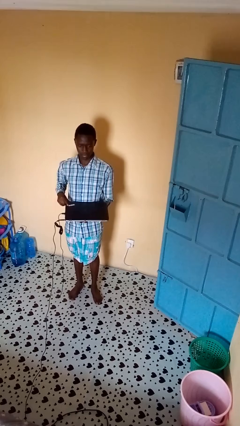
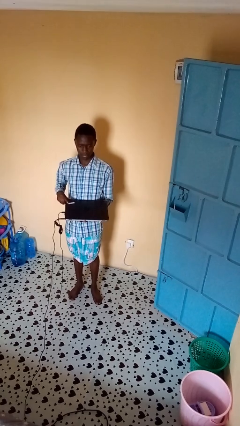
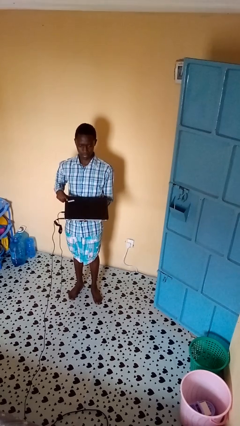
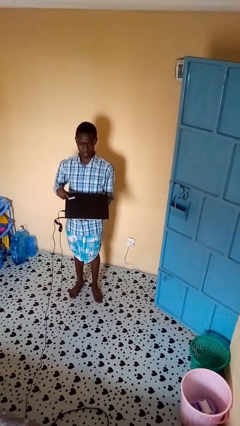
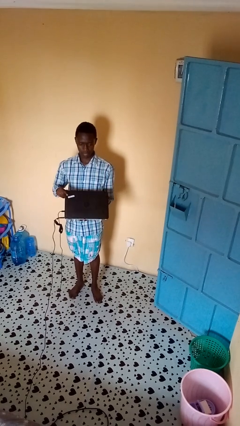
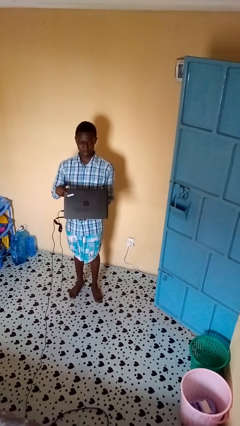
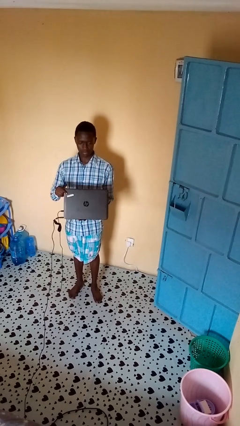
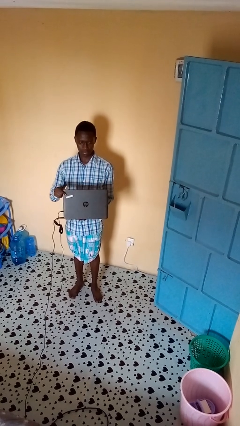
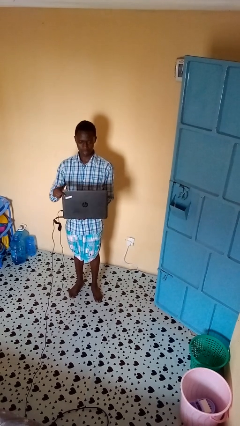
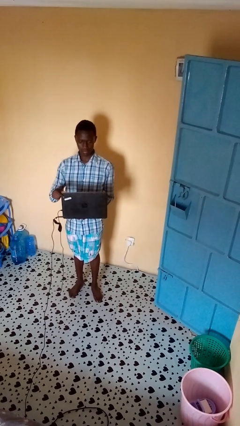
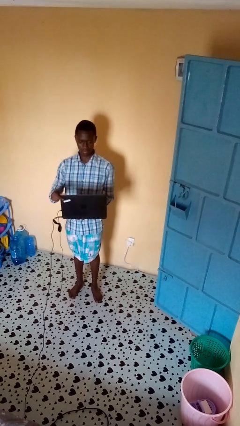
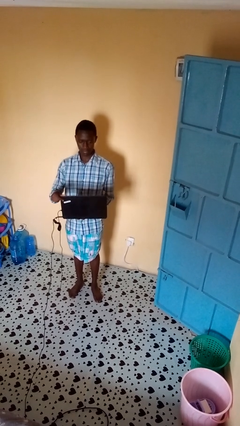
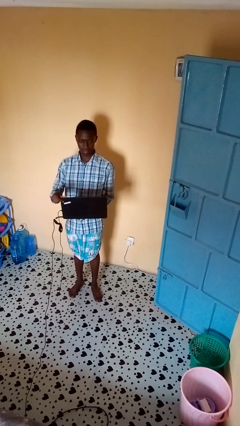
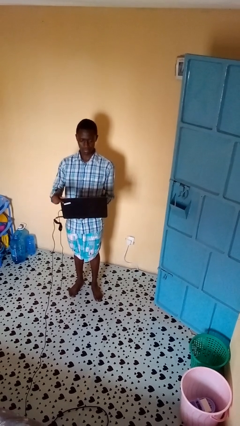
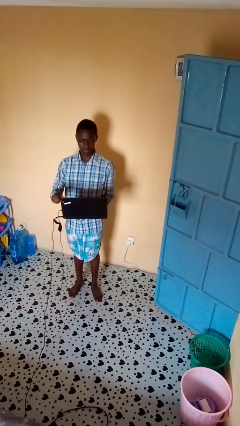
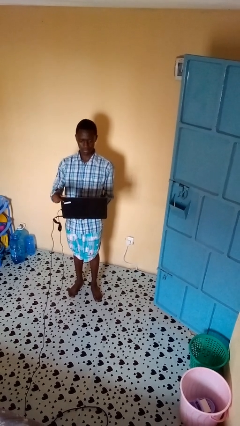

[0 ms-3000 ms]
person opens laptop

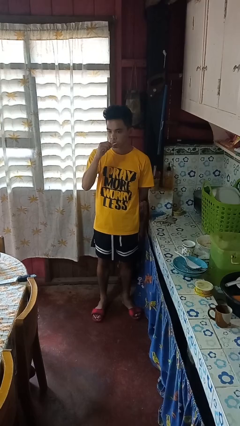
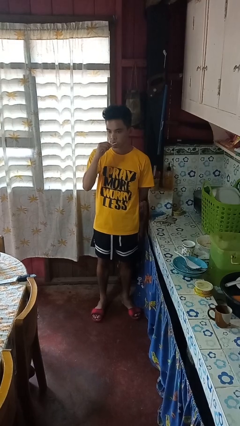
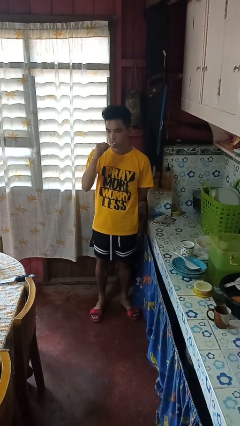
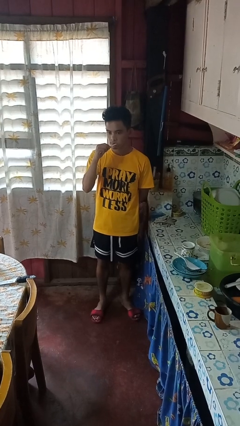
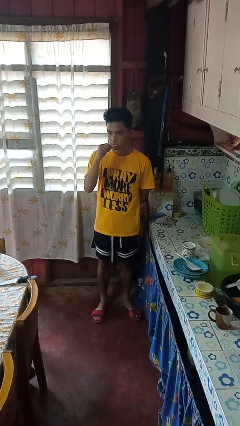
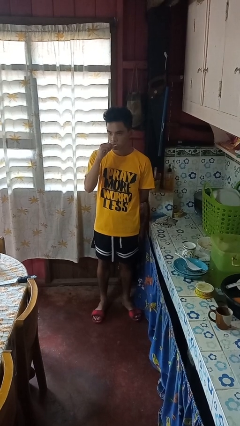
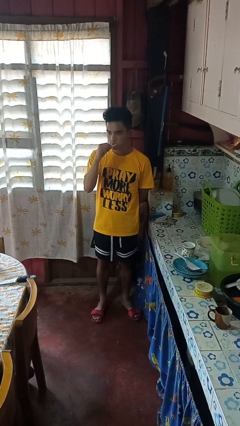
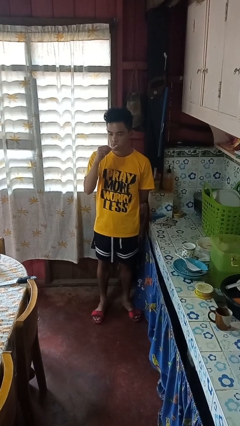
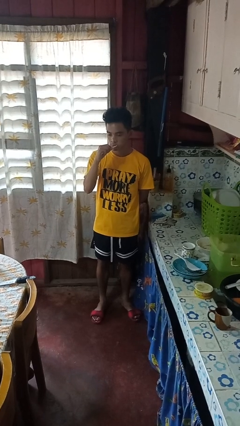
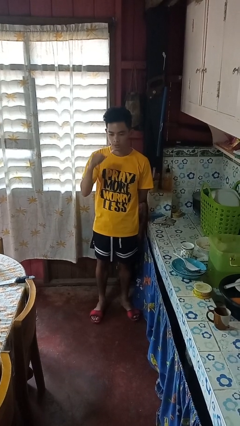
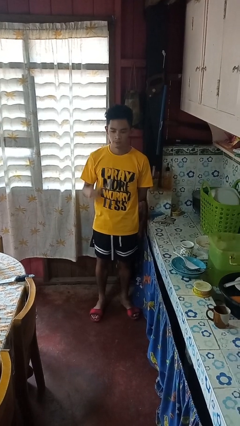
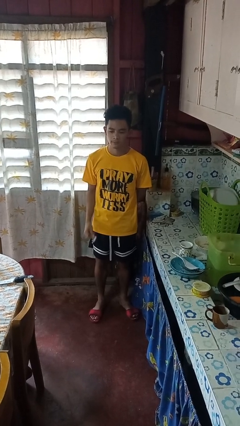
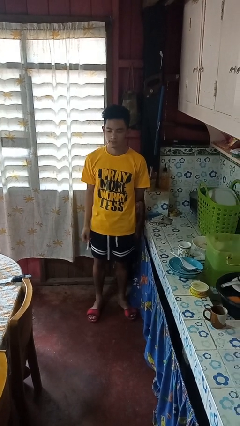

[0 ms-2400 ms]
person brushes teeth

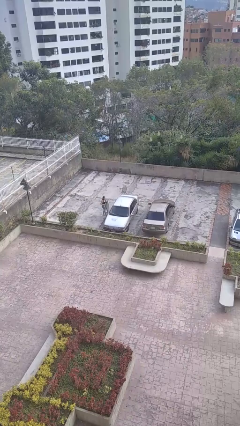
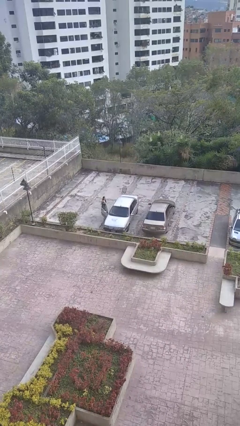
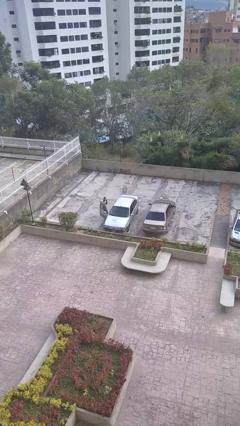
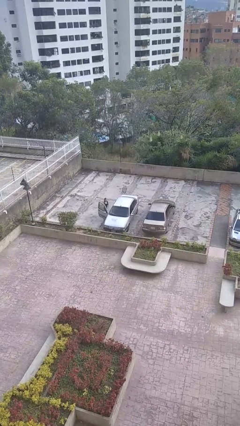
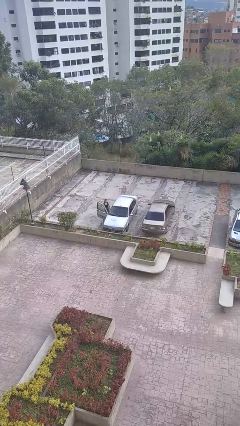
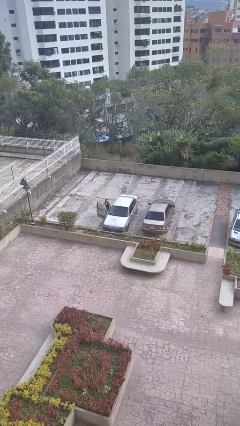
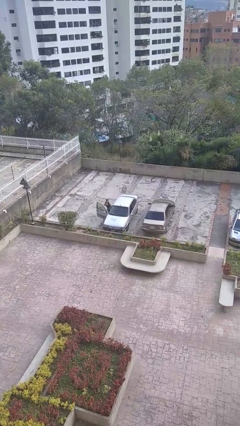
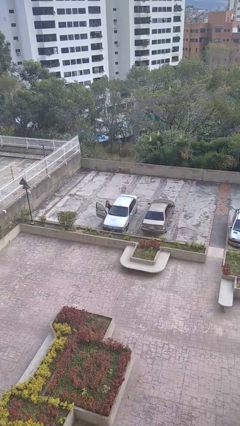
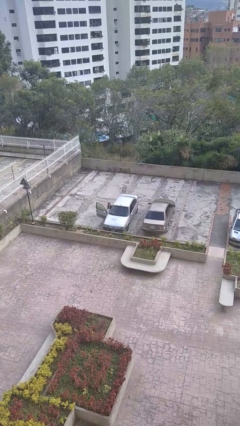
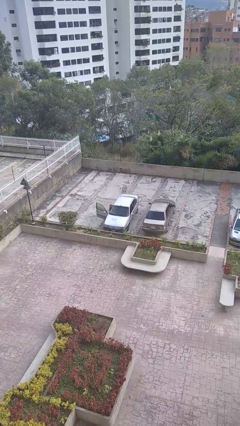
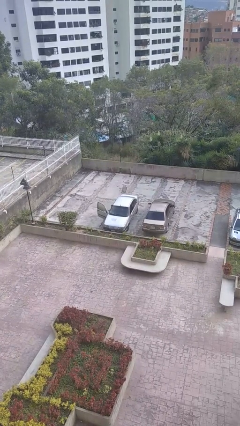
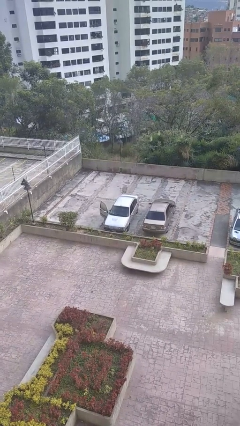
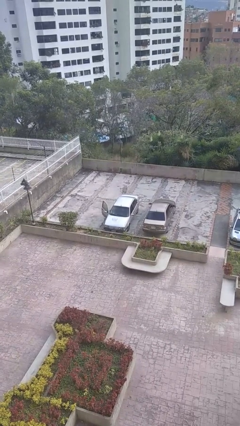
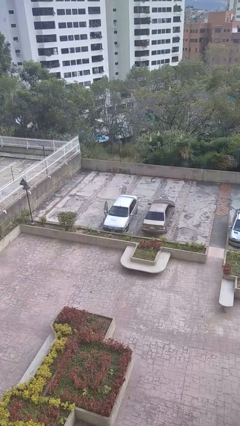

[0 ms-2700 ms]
car picks up person

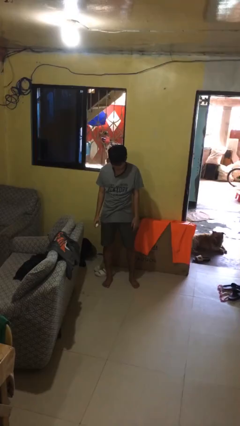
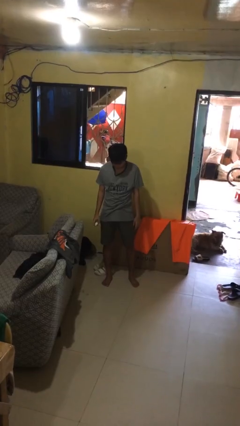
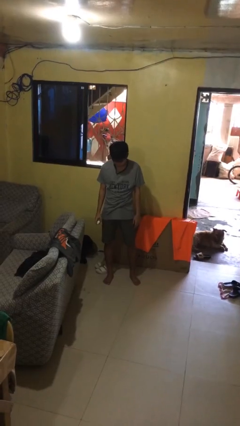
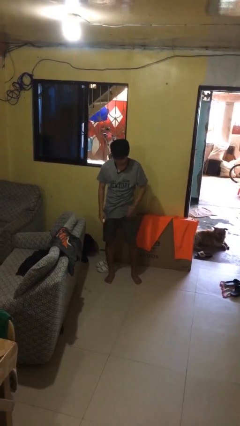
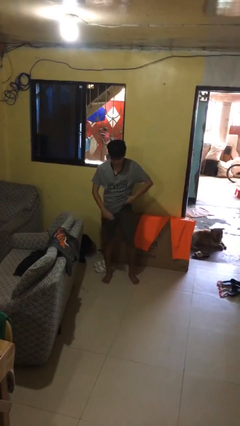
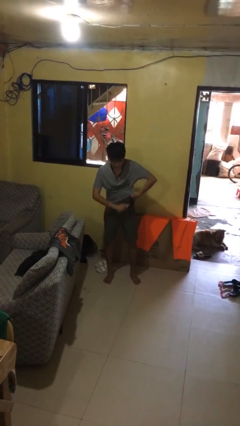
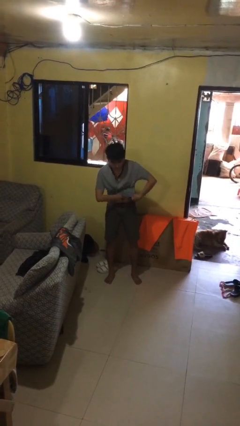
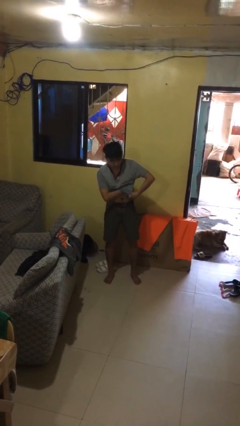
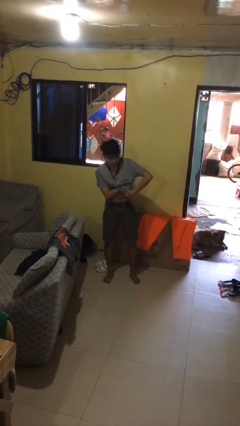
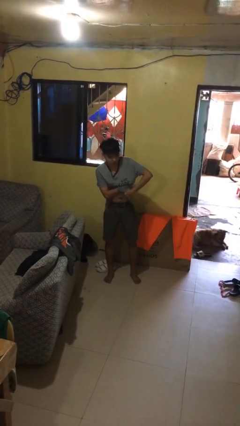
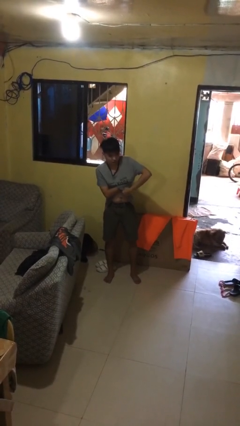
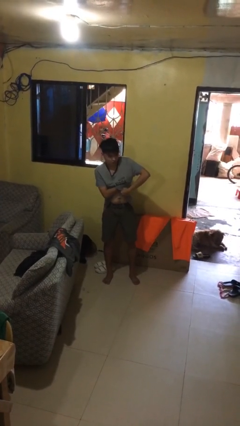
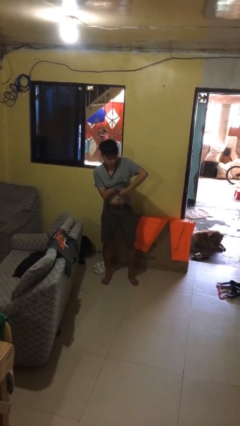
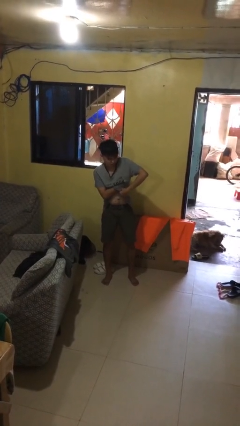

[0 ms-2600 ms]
person applies deodorant

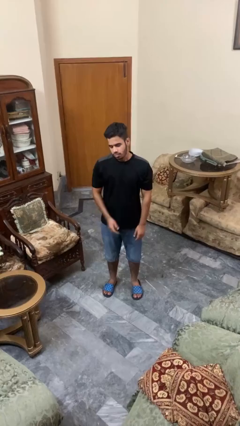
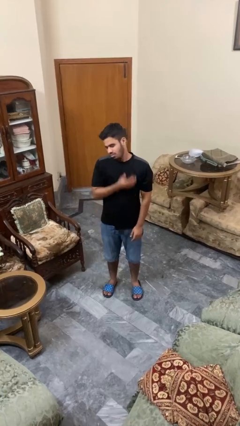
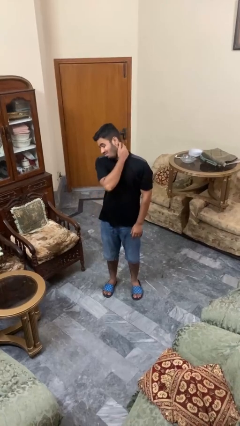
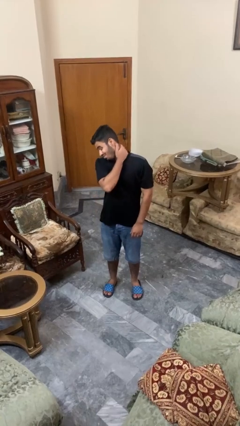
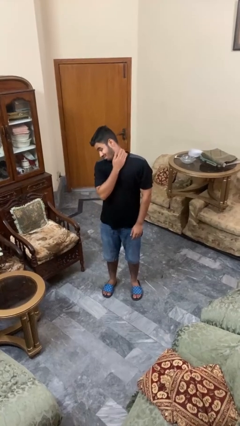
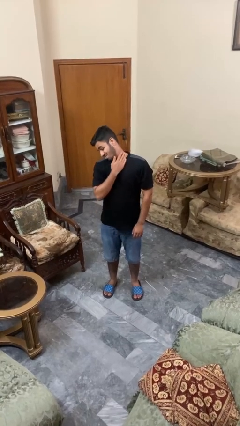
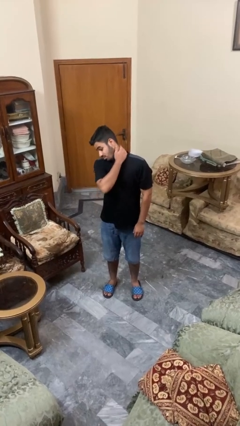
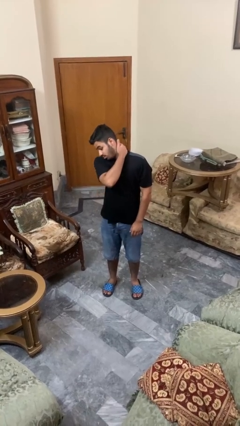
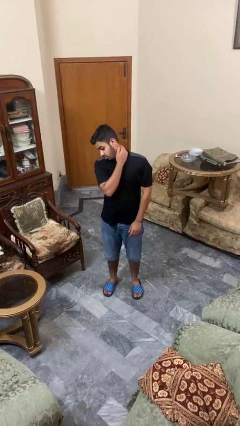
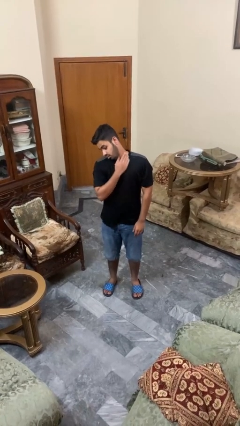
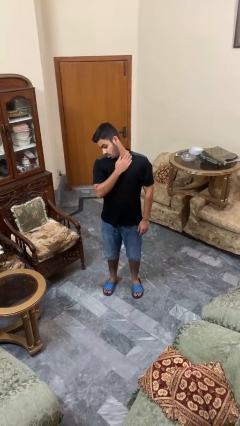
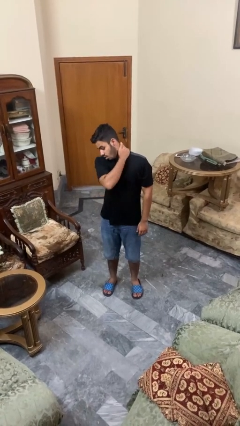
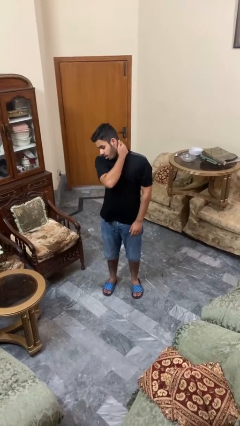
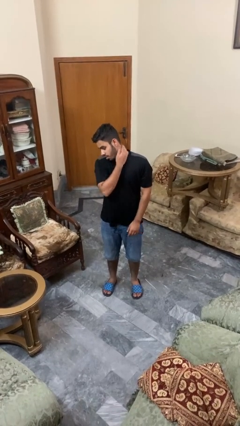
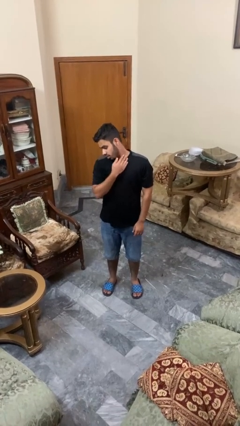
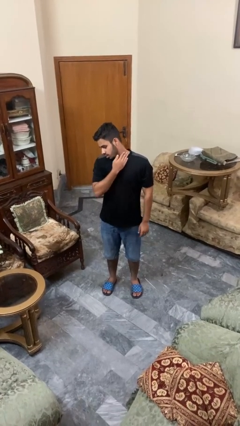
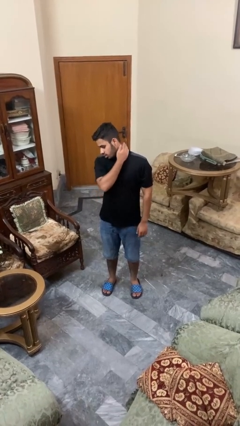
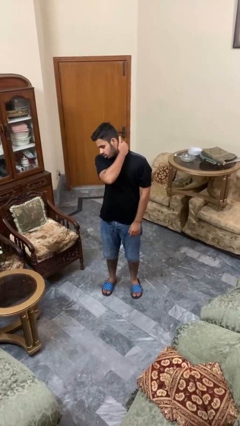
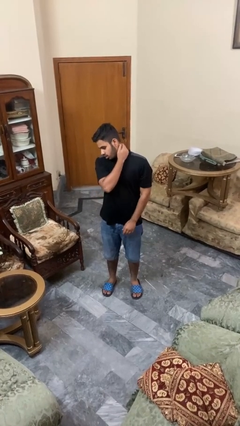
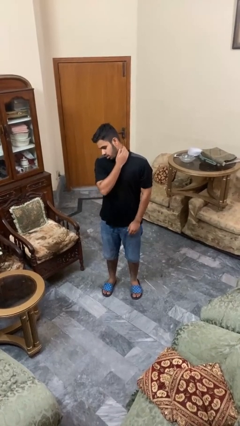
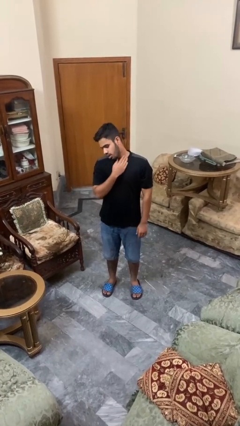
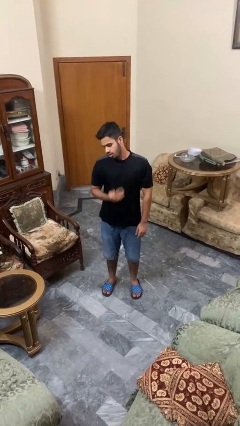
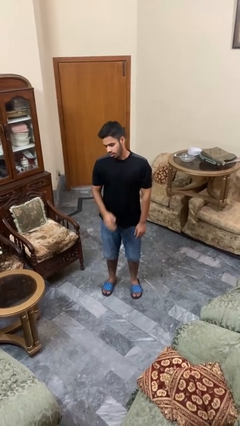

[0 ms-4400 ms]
person rubs neck

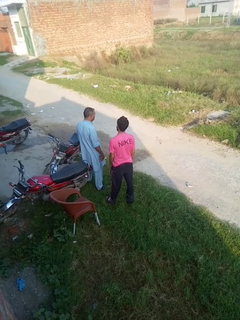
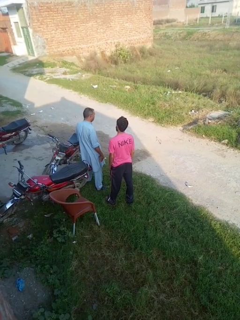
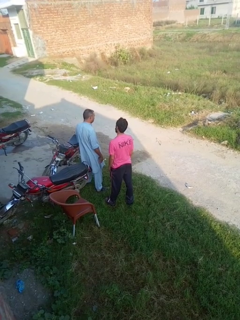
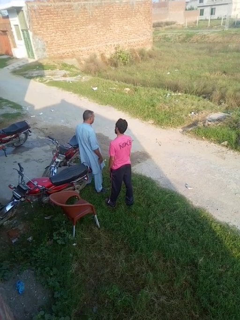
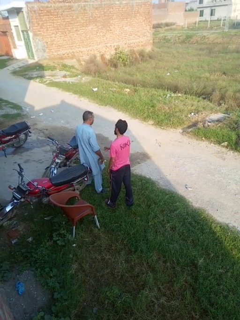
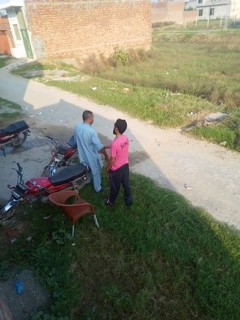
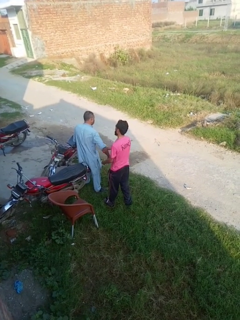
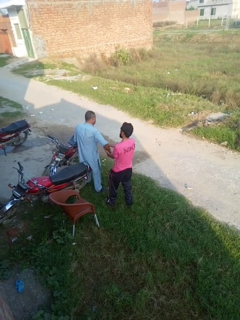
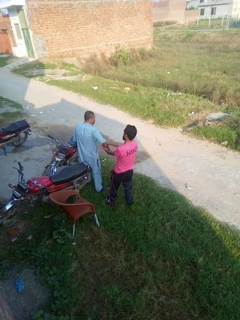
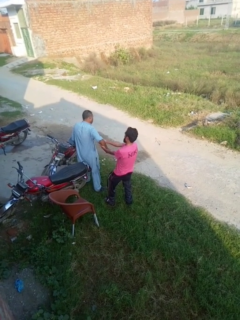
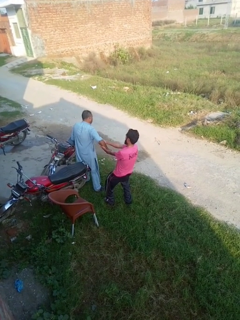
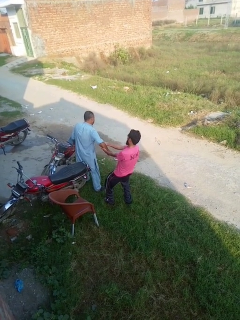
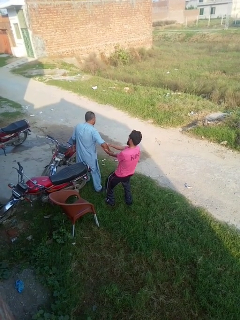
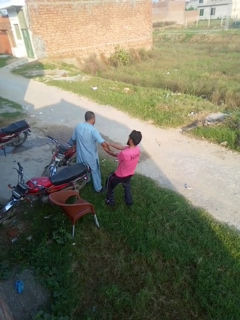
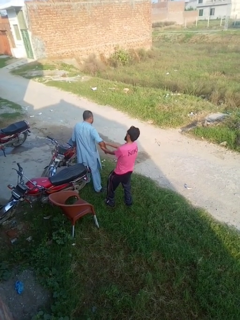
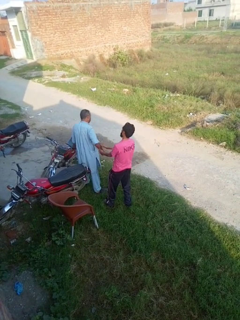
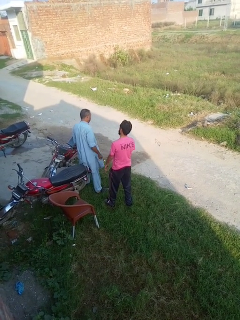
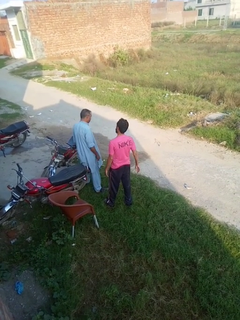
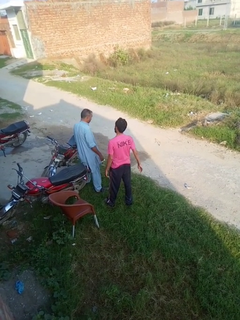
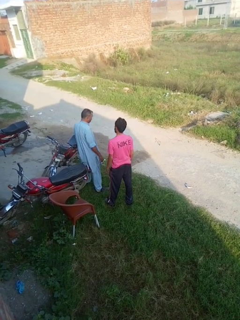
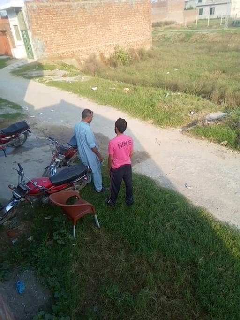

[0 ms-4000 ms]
person grabs person by forearm
